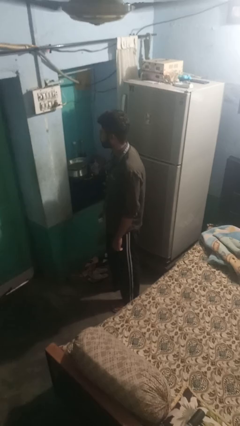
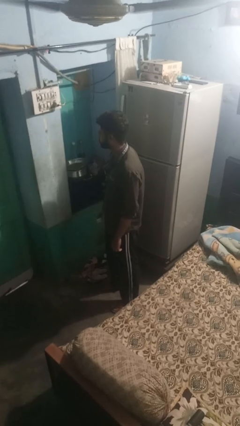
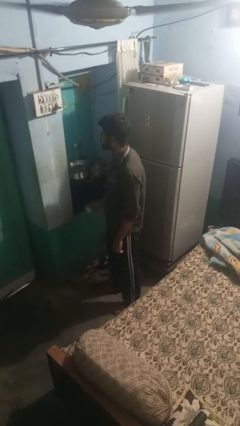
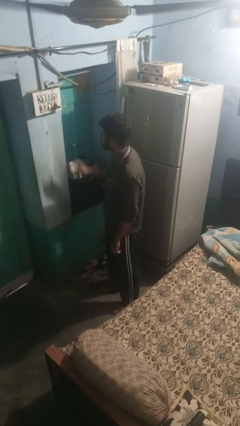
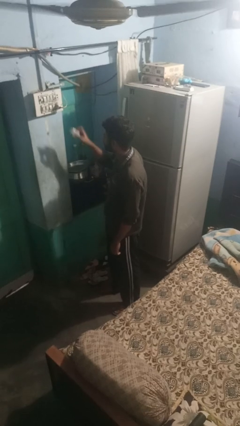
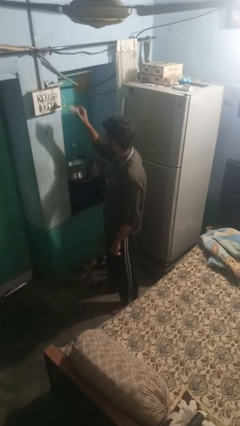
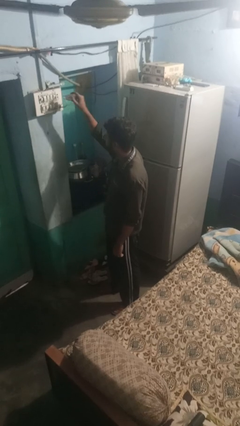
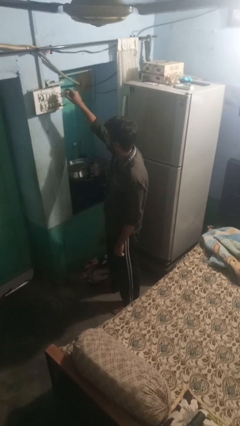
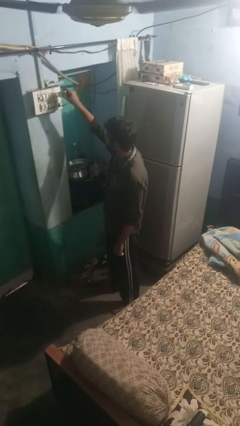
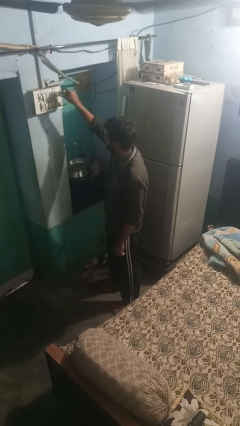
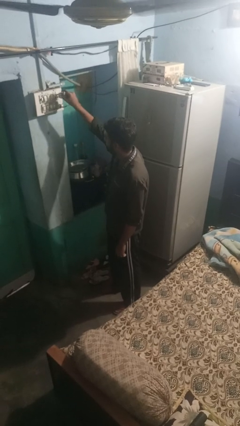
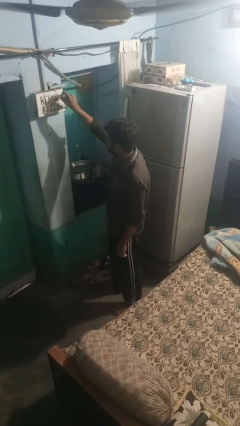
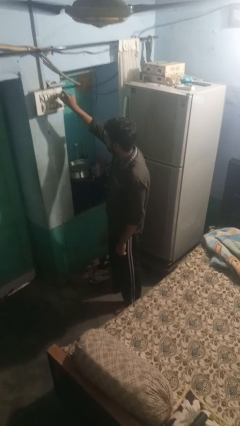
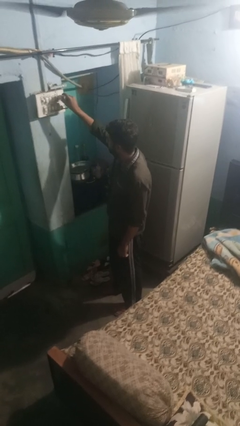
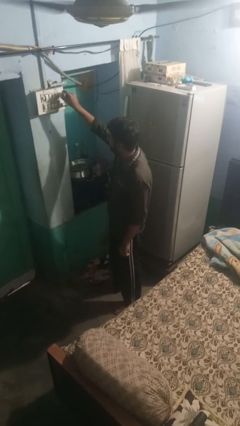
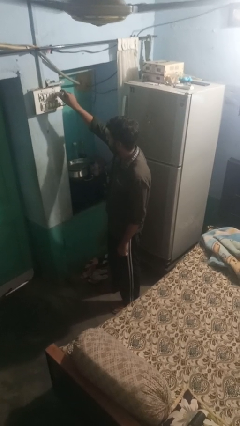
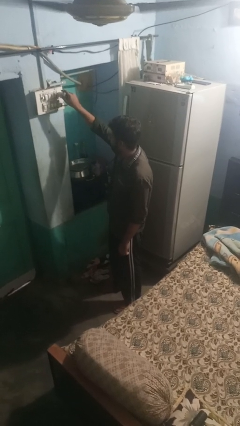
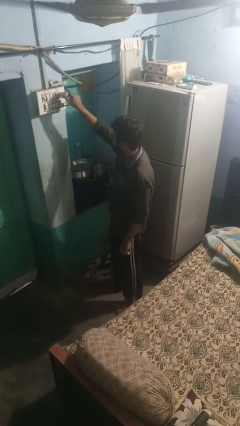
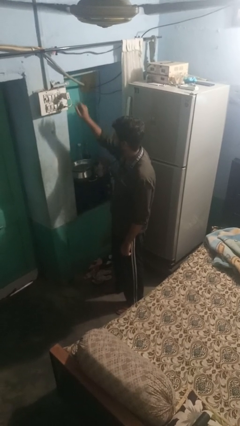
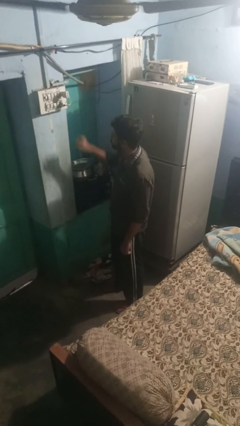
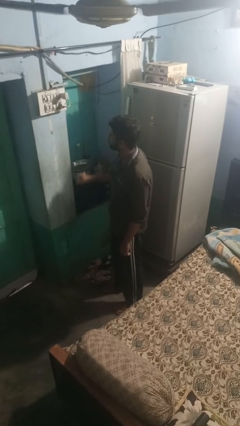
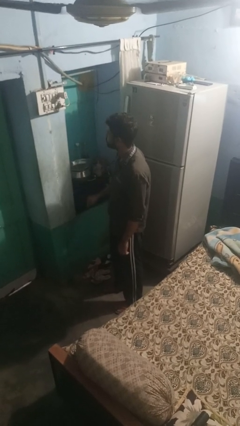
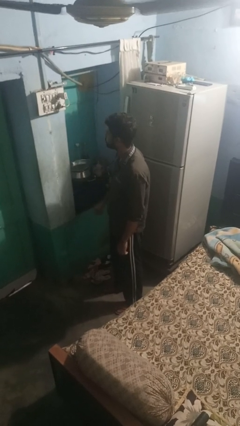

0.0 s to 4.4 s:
person plugs into electrical socket

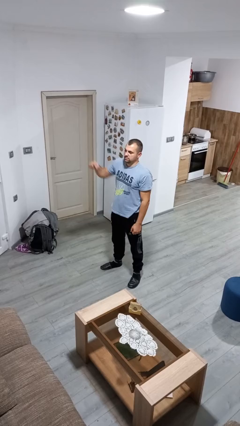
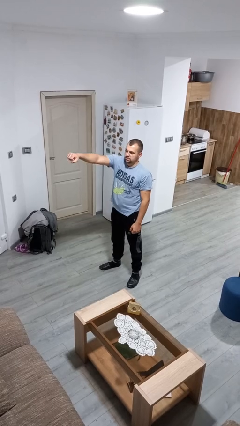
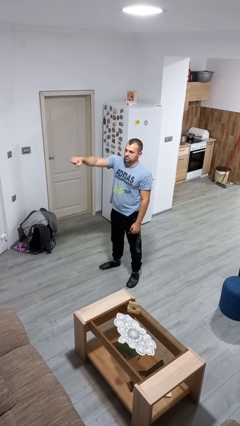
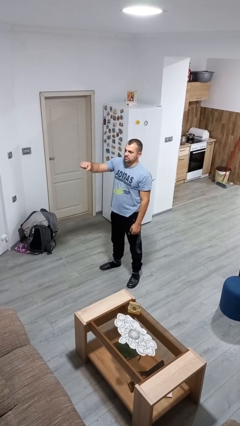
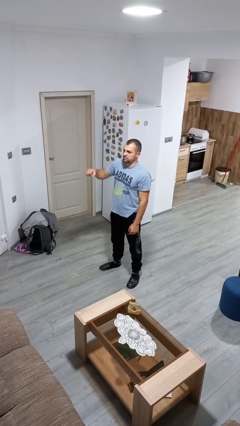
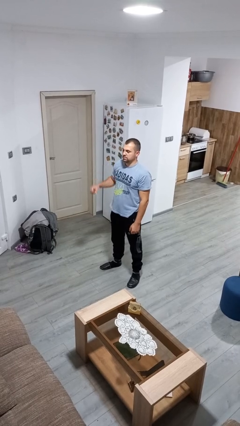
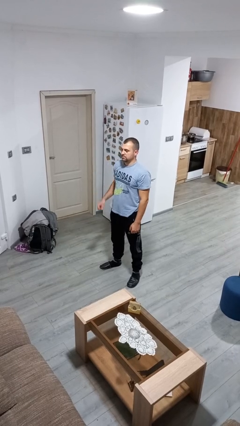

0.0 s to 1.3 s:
person punches

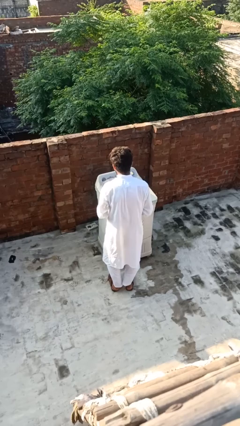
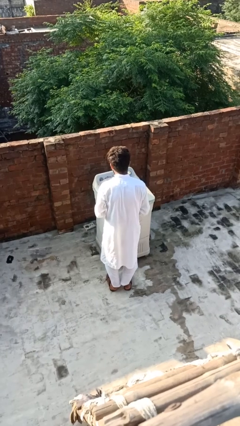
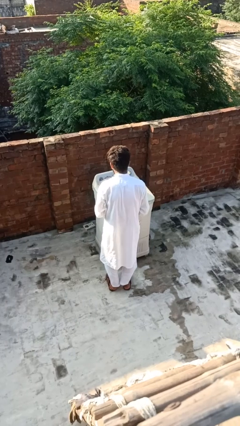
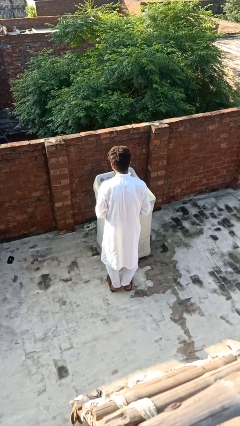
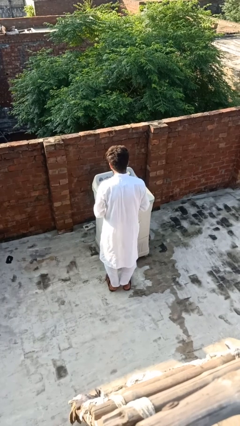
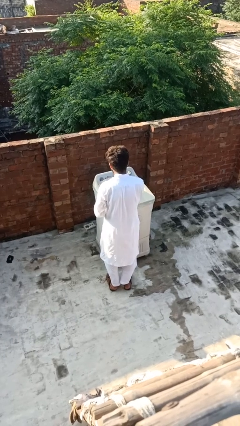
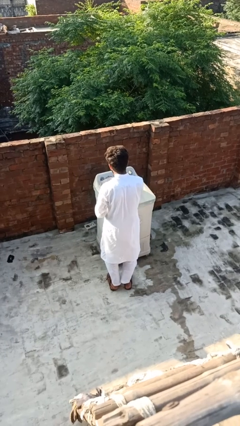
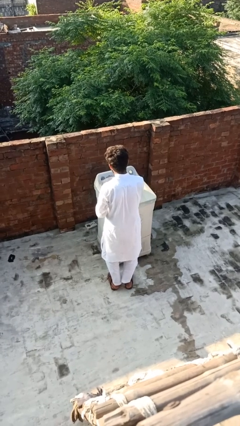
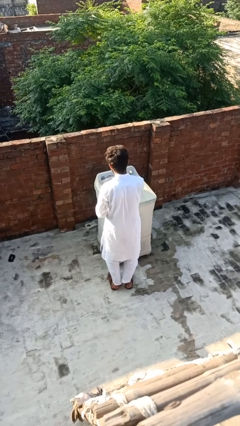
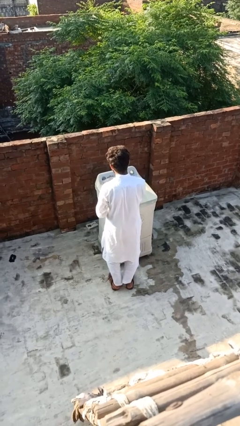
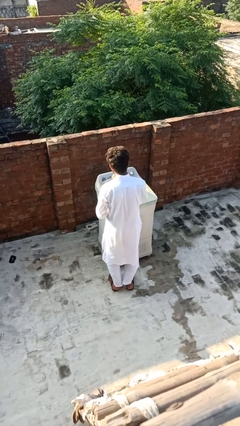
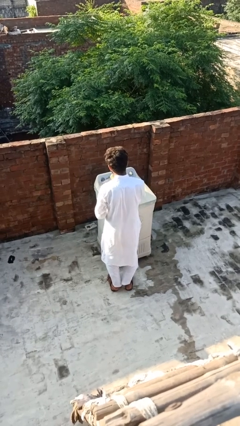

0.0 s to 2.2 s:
person pours into bowl

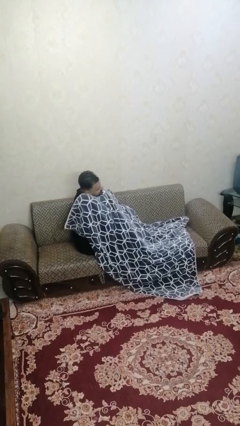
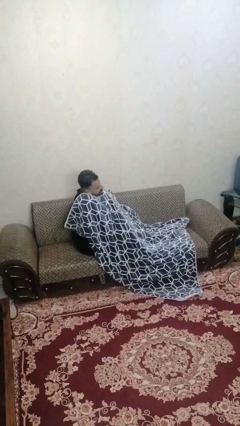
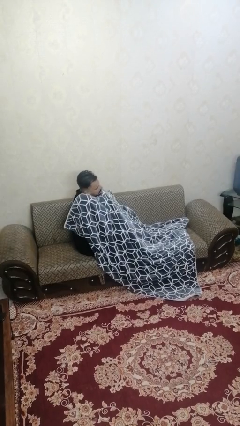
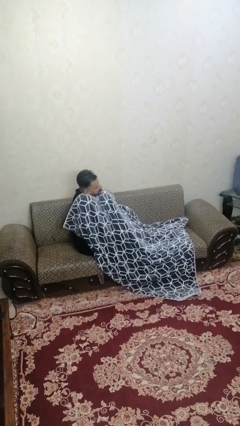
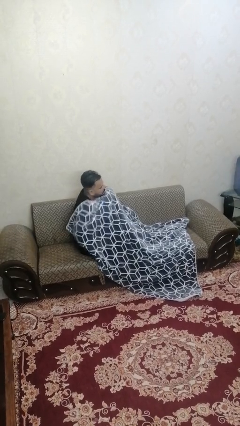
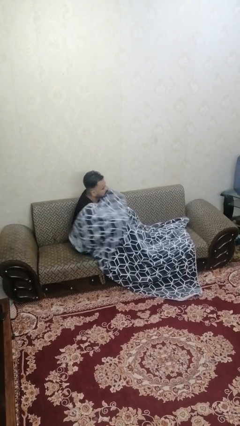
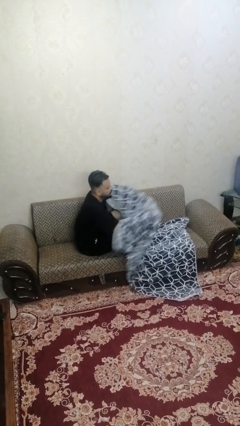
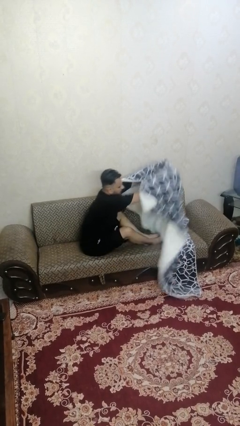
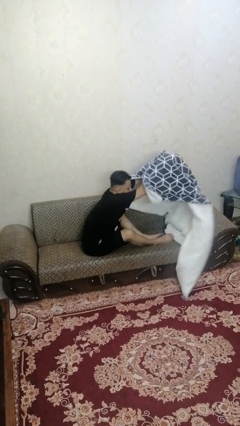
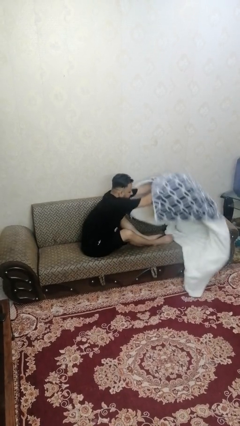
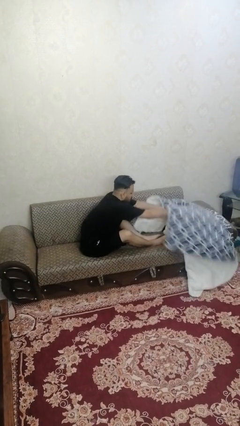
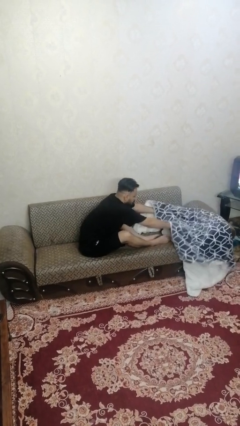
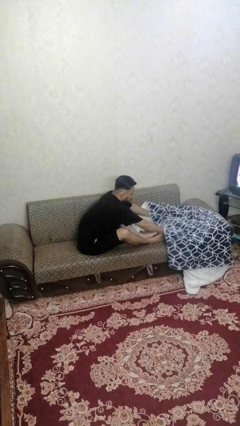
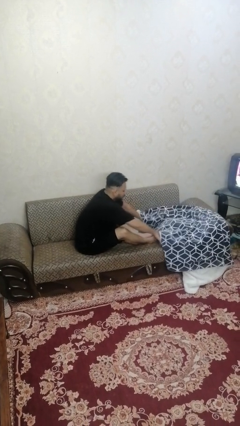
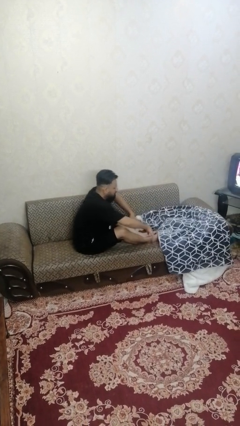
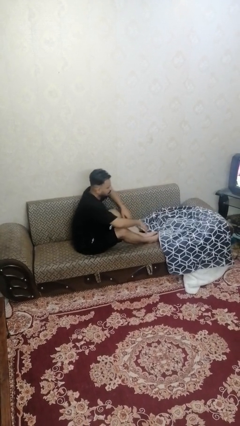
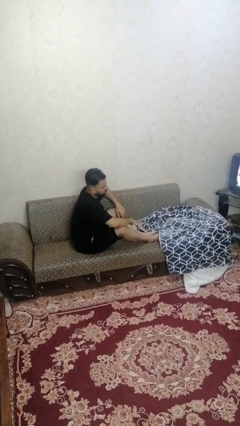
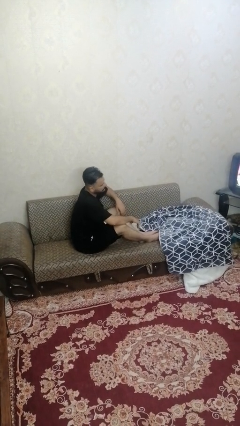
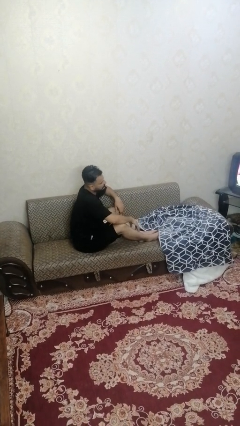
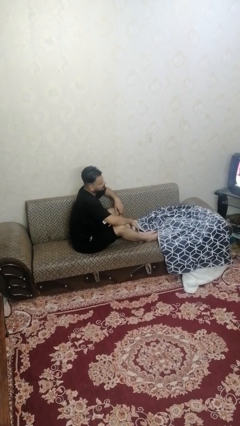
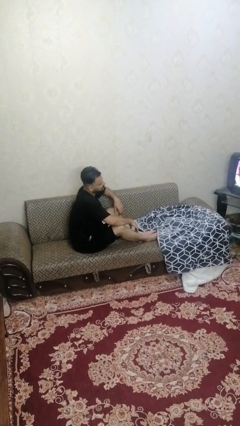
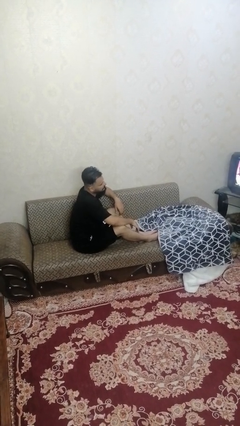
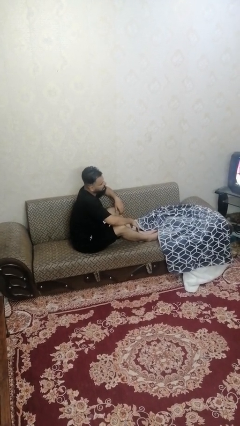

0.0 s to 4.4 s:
person uncovers with blanket

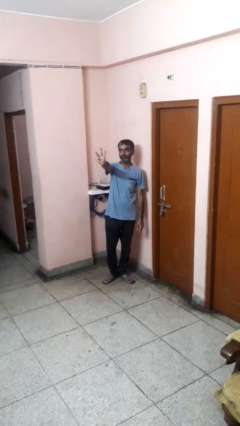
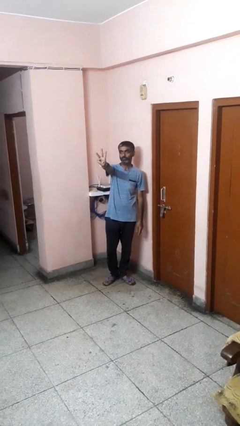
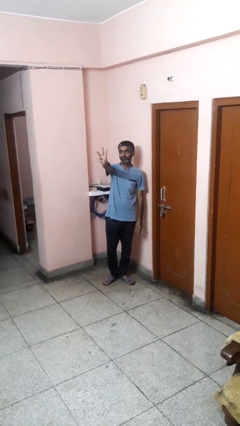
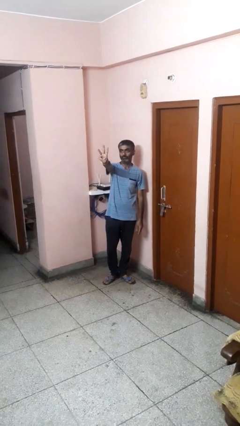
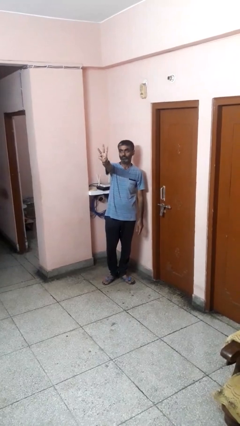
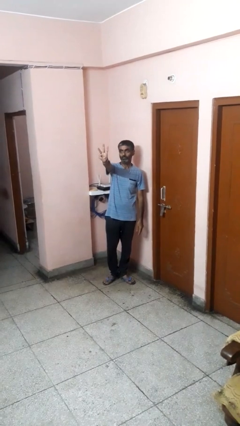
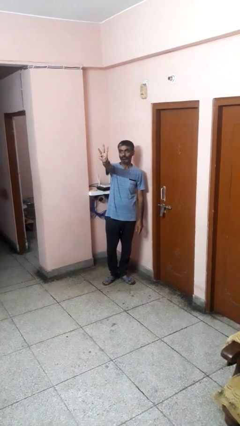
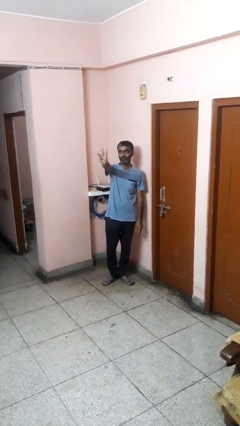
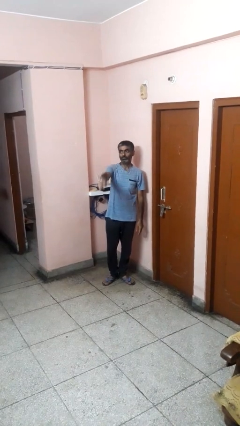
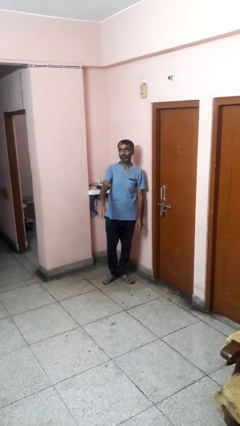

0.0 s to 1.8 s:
person gestures number three

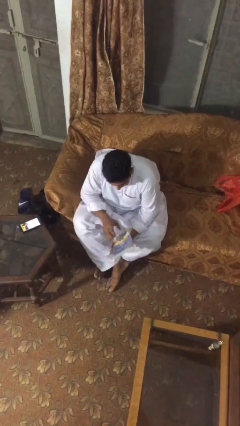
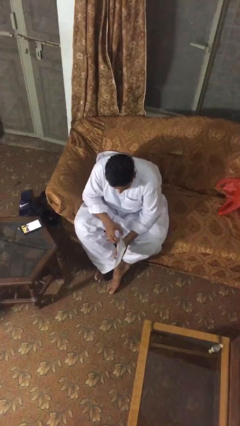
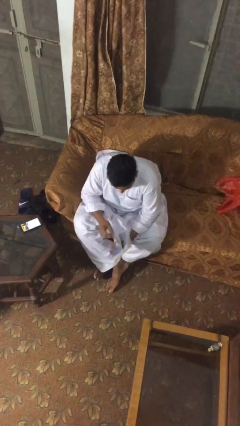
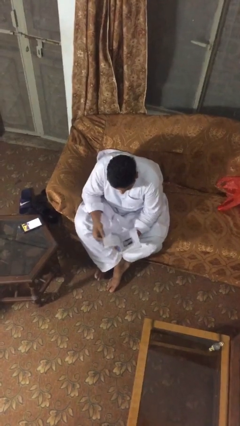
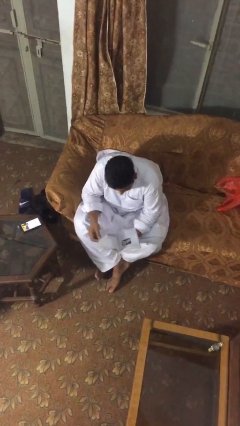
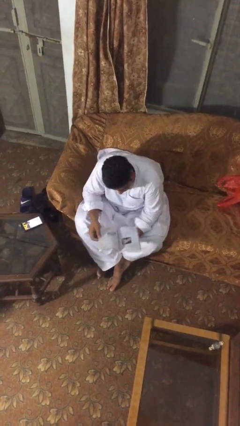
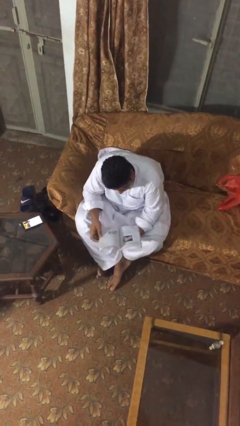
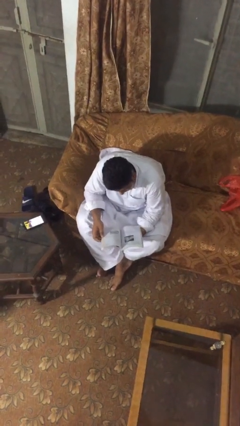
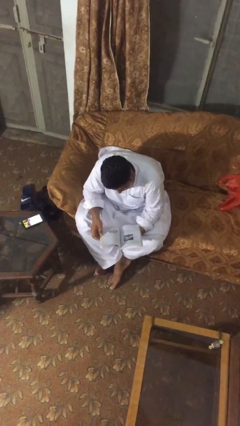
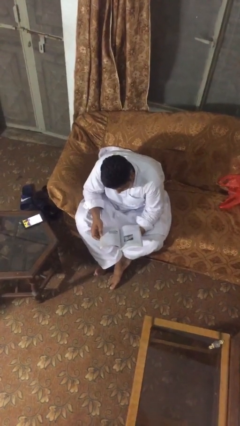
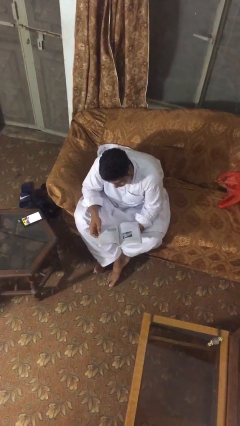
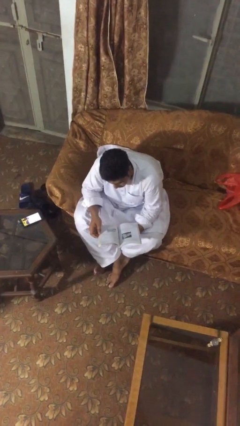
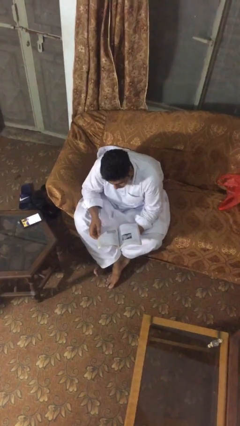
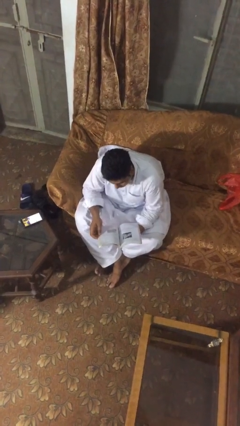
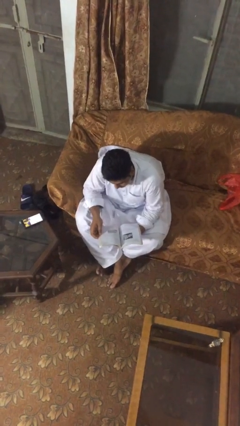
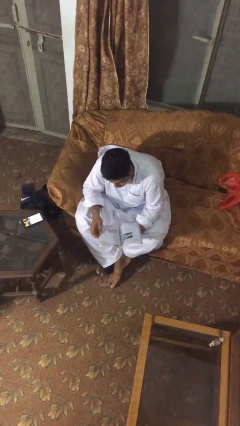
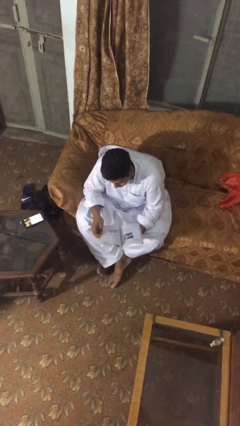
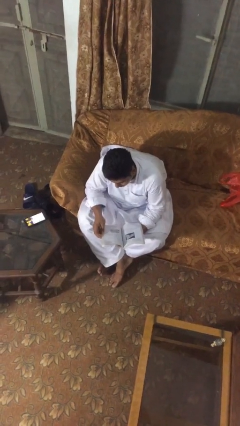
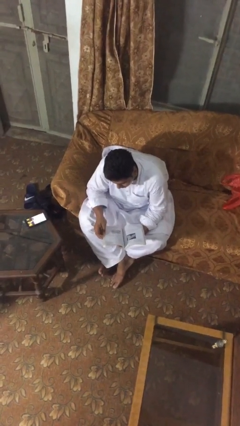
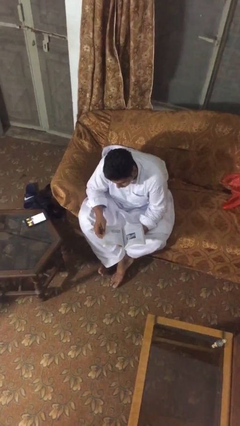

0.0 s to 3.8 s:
person reads document
